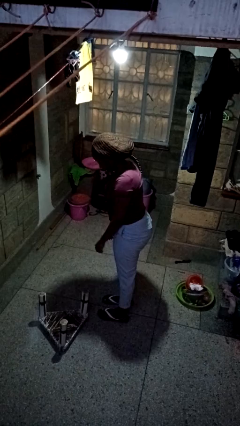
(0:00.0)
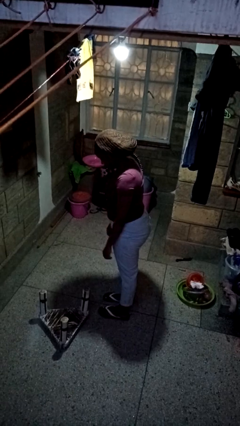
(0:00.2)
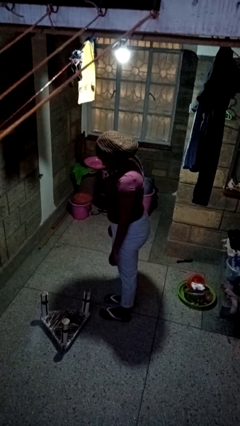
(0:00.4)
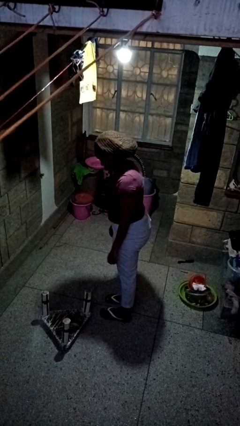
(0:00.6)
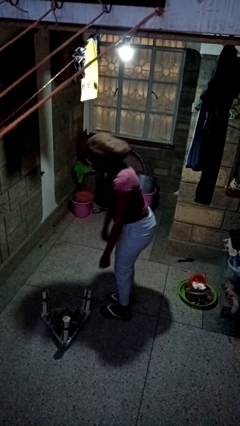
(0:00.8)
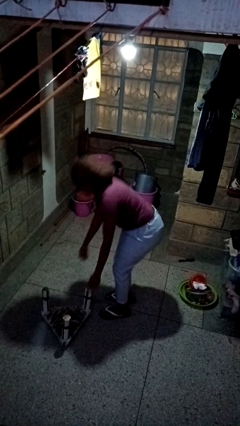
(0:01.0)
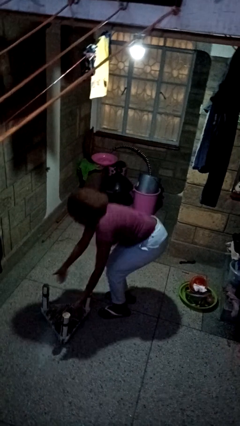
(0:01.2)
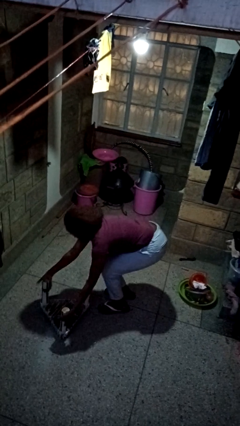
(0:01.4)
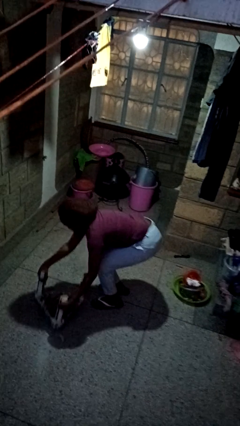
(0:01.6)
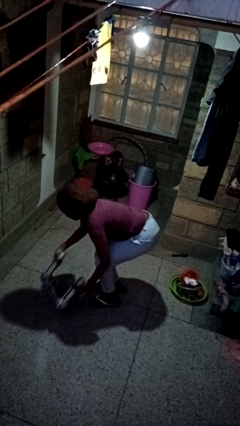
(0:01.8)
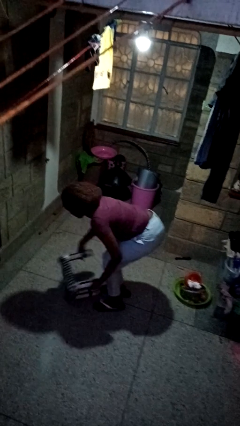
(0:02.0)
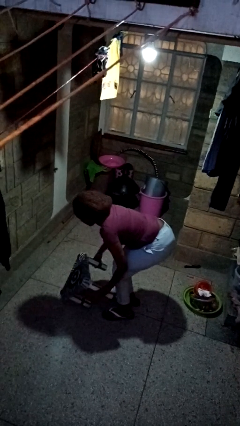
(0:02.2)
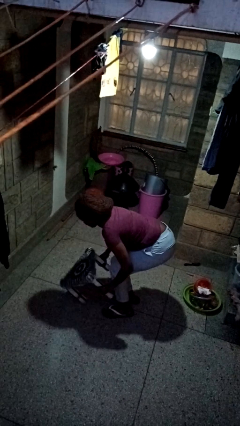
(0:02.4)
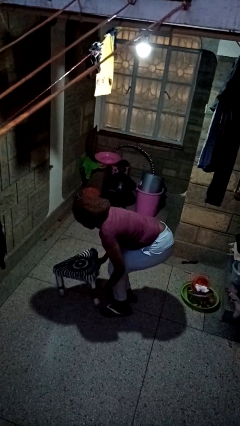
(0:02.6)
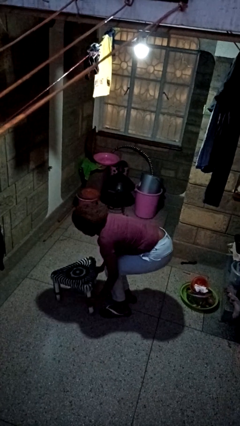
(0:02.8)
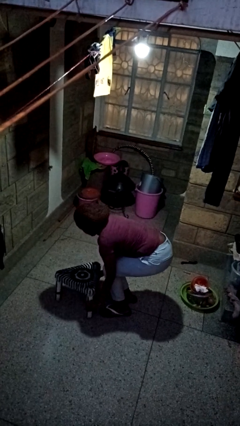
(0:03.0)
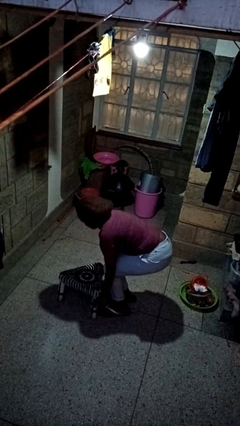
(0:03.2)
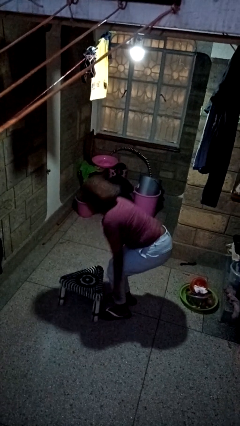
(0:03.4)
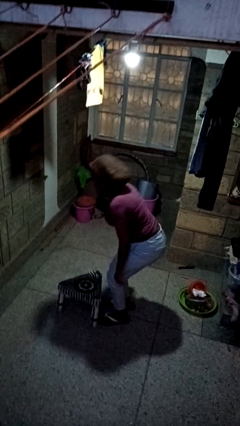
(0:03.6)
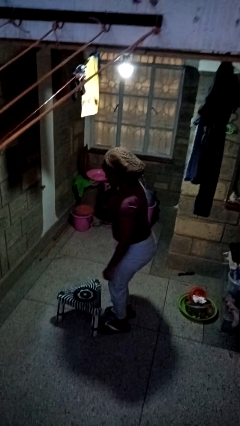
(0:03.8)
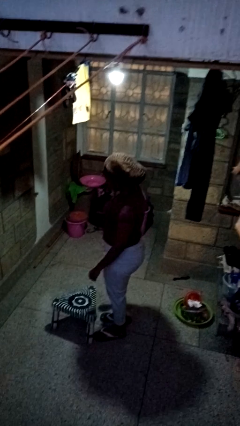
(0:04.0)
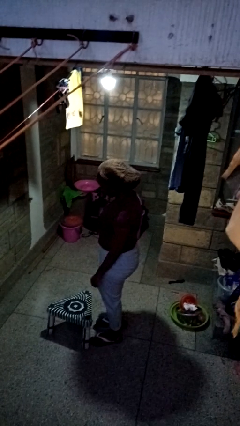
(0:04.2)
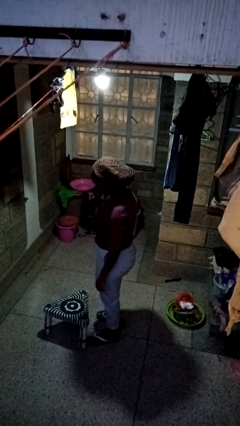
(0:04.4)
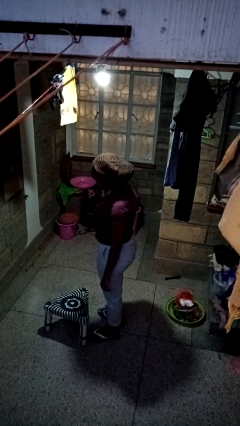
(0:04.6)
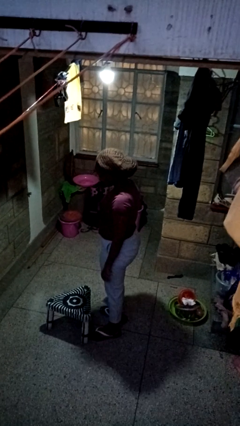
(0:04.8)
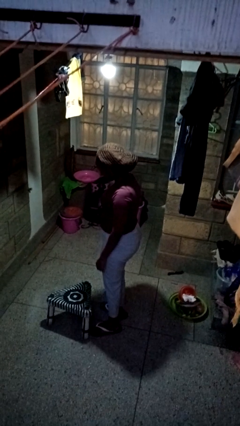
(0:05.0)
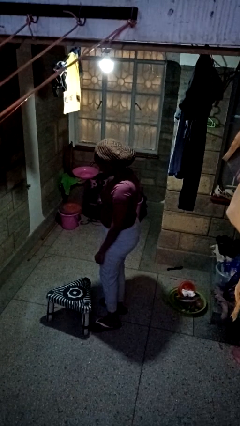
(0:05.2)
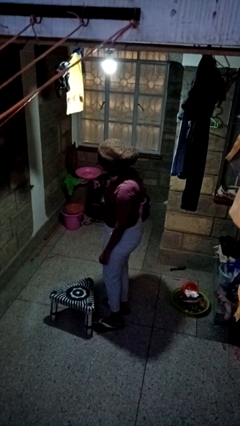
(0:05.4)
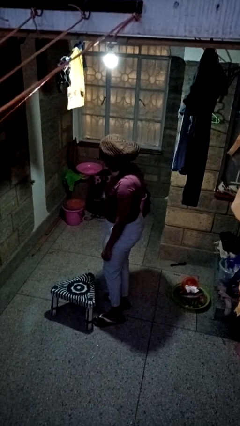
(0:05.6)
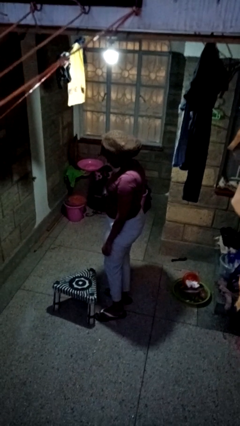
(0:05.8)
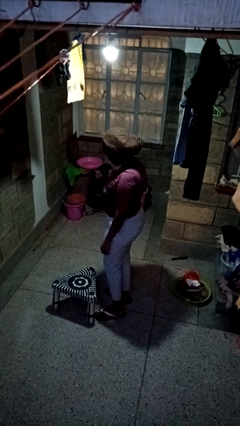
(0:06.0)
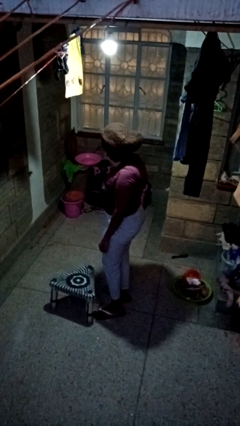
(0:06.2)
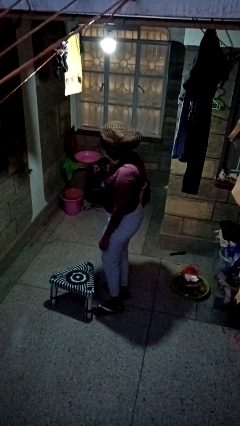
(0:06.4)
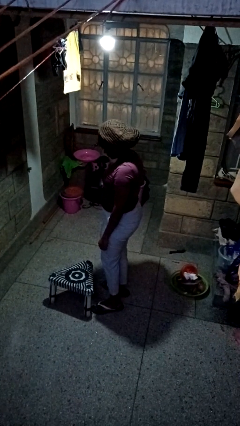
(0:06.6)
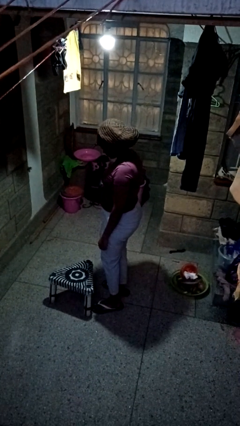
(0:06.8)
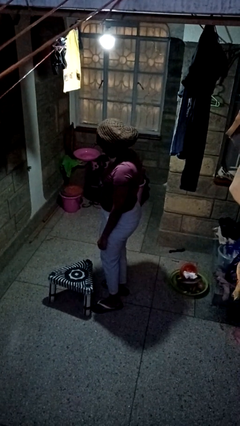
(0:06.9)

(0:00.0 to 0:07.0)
person sets upright furniture

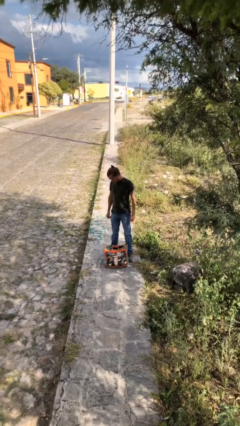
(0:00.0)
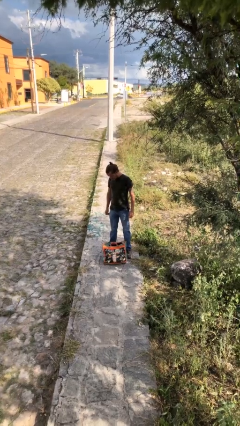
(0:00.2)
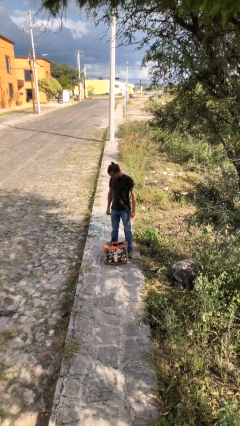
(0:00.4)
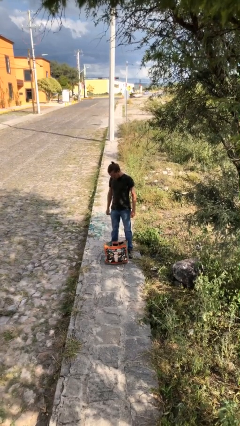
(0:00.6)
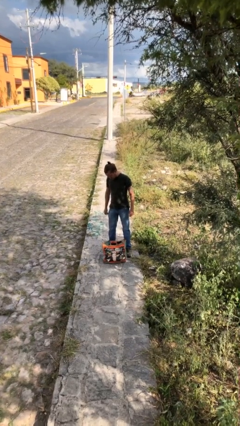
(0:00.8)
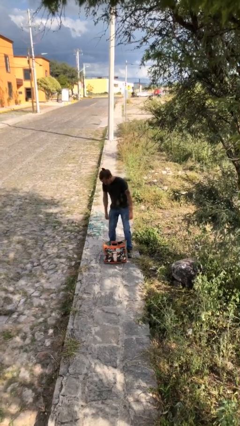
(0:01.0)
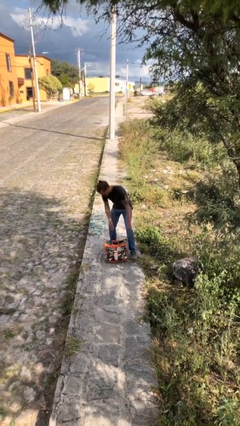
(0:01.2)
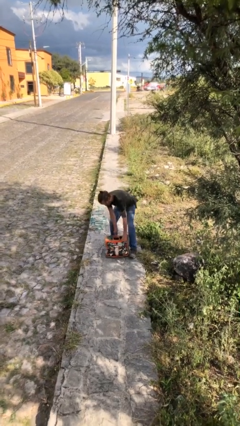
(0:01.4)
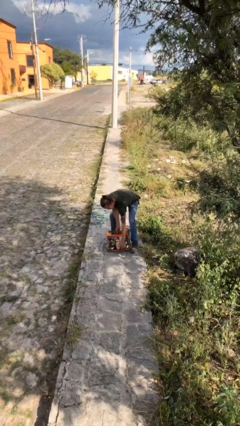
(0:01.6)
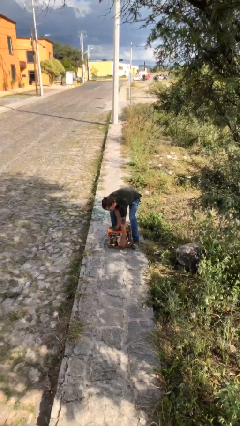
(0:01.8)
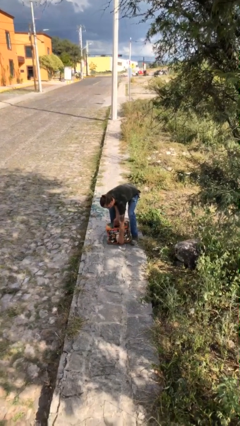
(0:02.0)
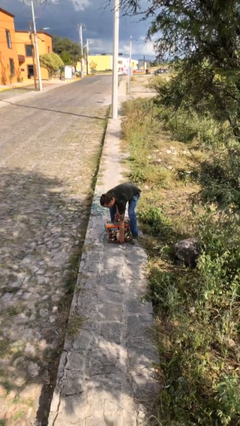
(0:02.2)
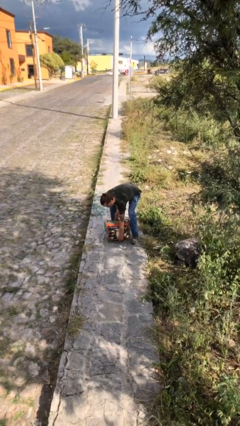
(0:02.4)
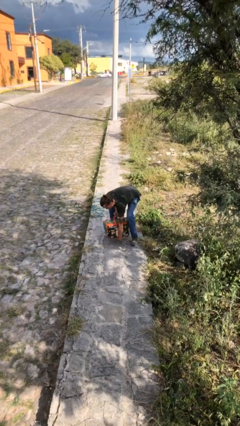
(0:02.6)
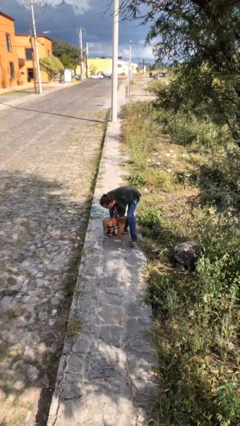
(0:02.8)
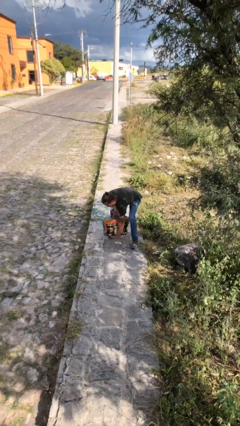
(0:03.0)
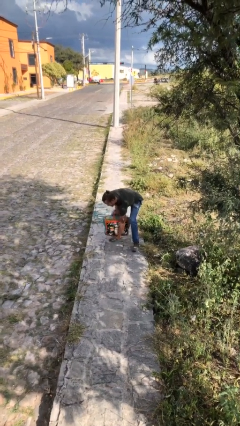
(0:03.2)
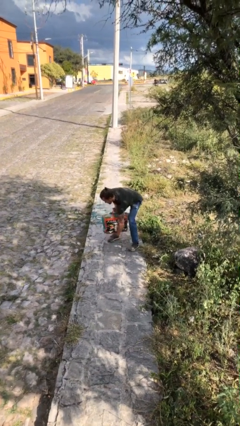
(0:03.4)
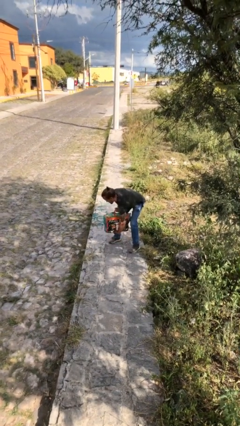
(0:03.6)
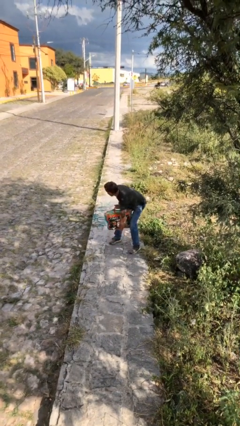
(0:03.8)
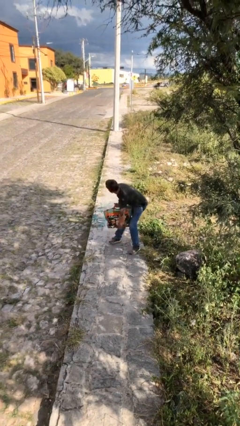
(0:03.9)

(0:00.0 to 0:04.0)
person picks up object from floor

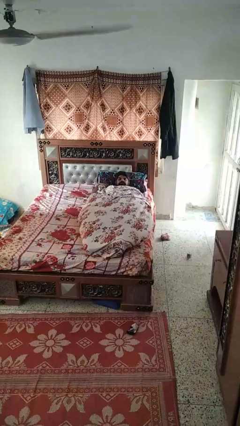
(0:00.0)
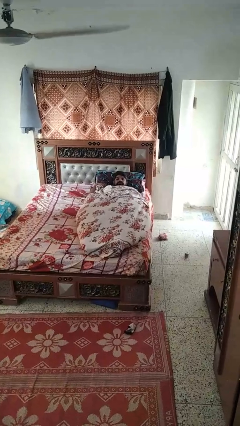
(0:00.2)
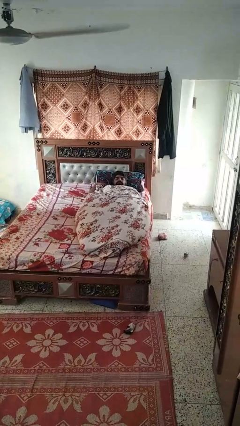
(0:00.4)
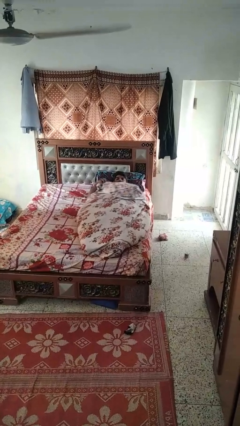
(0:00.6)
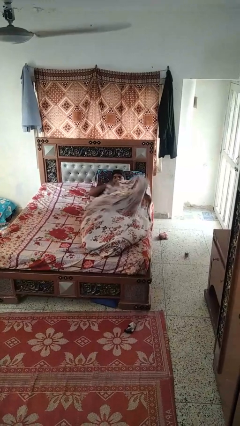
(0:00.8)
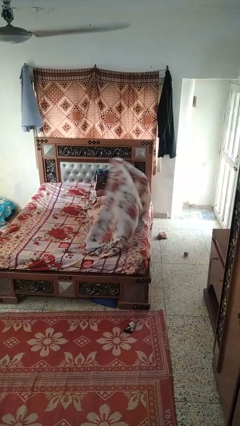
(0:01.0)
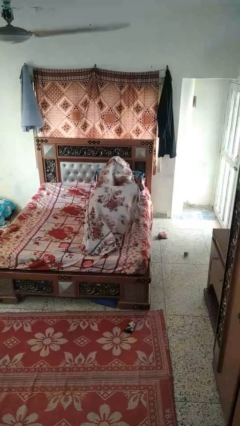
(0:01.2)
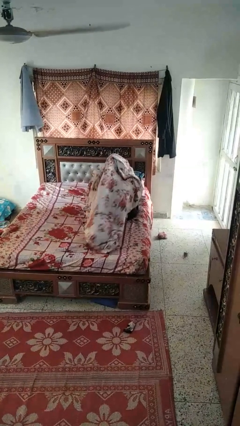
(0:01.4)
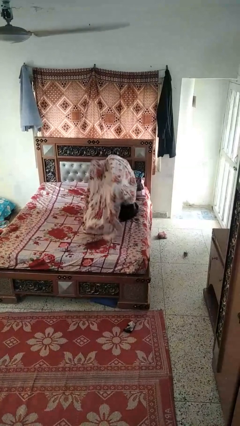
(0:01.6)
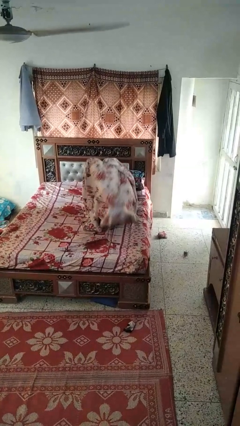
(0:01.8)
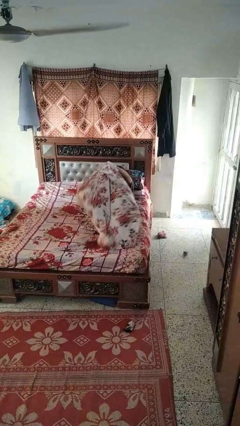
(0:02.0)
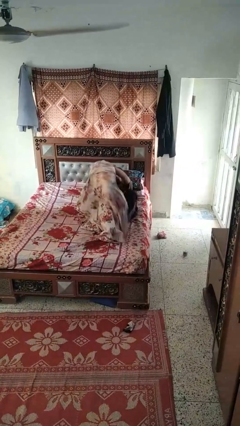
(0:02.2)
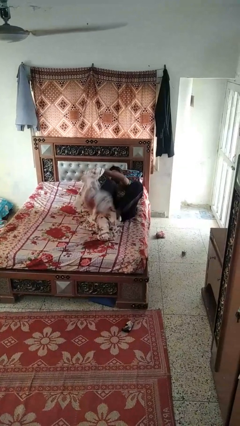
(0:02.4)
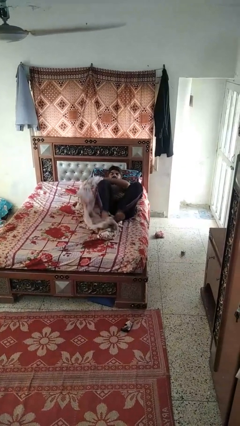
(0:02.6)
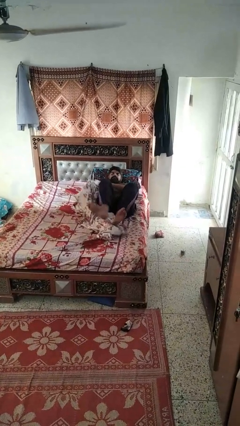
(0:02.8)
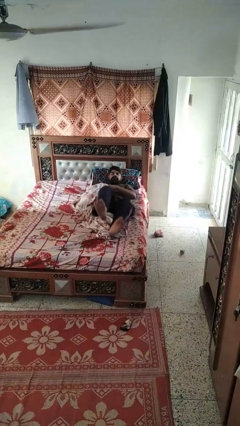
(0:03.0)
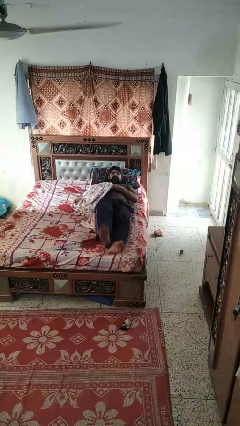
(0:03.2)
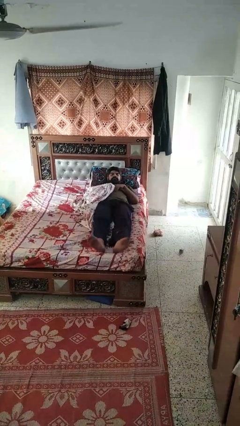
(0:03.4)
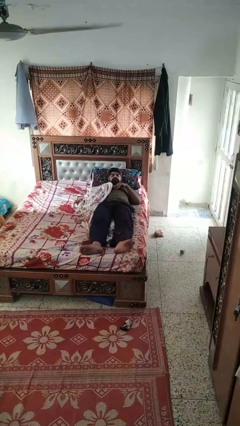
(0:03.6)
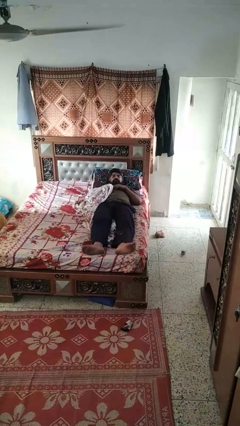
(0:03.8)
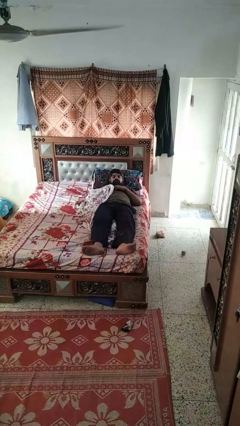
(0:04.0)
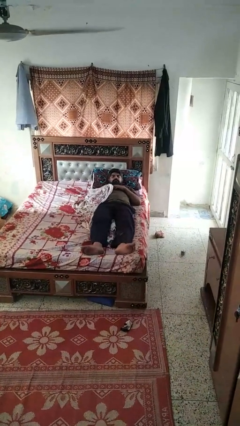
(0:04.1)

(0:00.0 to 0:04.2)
person uncovers with bedsheets

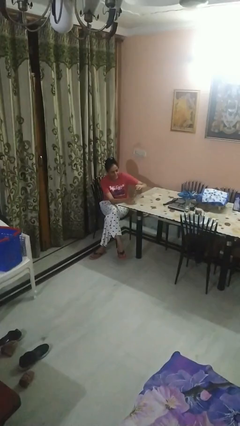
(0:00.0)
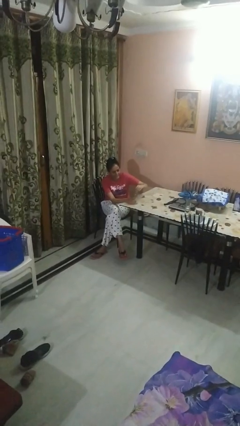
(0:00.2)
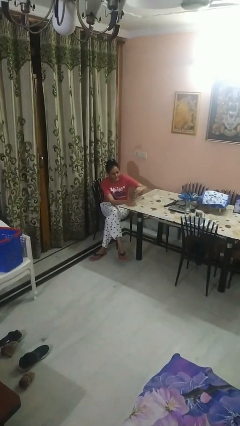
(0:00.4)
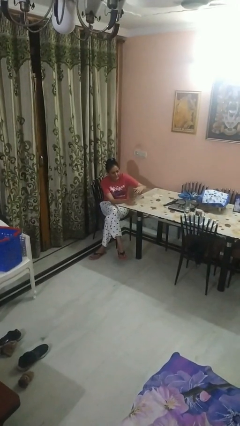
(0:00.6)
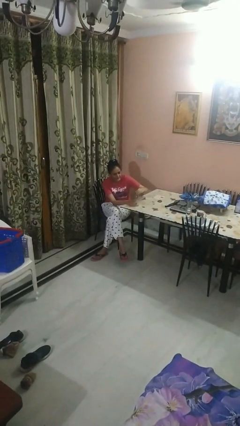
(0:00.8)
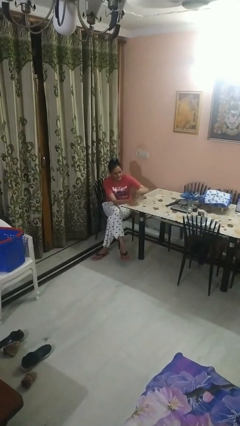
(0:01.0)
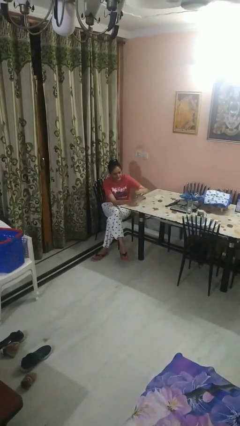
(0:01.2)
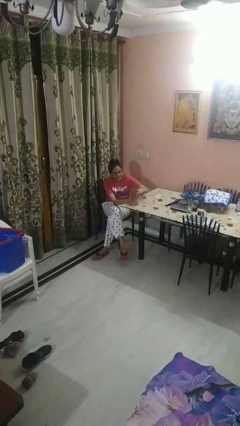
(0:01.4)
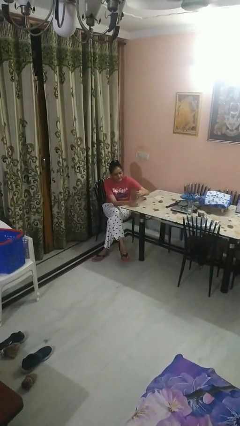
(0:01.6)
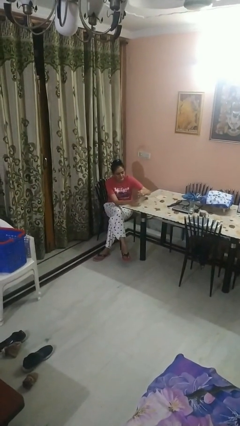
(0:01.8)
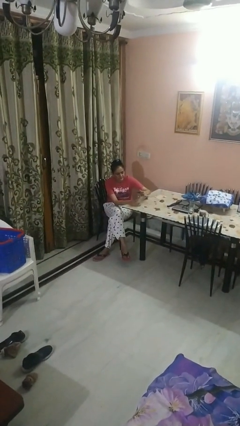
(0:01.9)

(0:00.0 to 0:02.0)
person screws lid to bottle

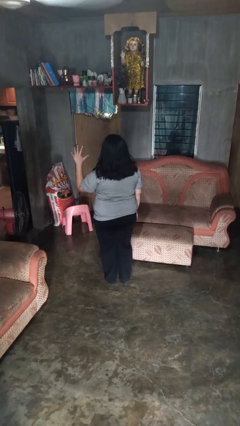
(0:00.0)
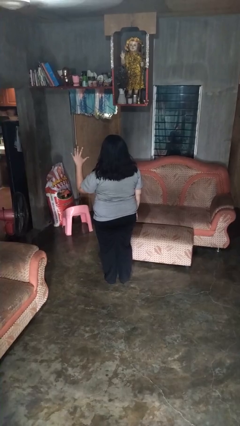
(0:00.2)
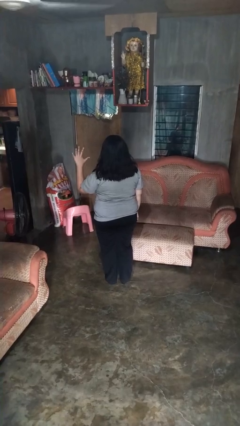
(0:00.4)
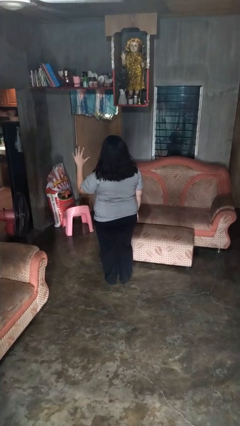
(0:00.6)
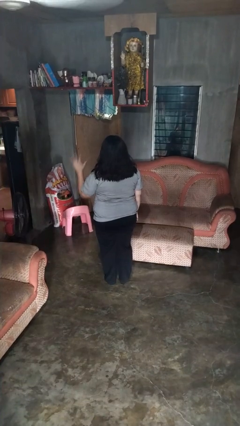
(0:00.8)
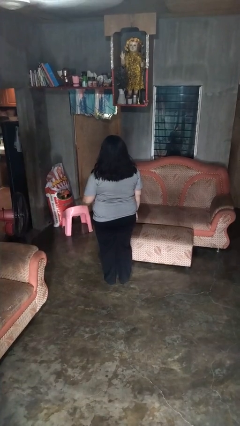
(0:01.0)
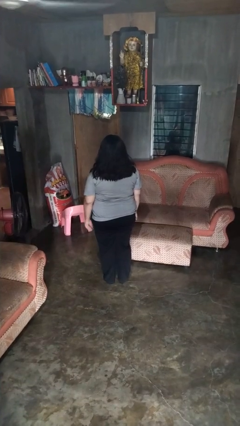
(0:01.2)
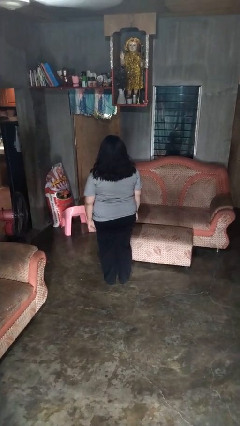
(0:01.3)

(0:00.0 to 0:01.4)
person gestures number five
